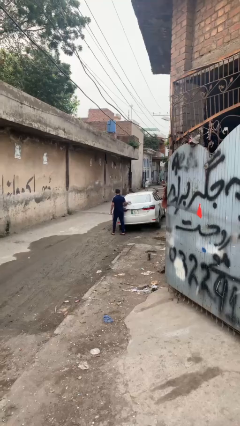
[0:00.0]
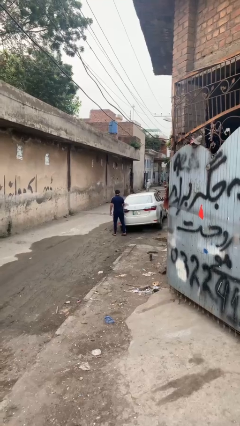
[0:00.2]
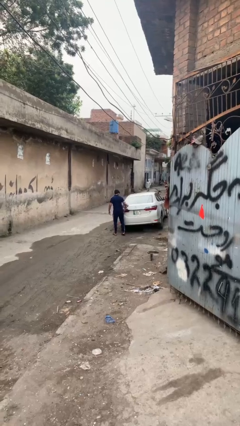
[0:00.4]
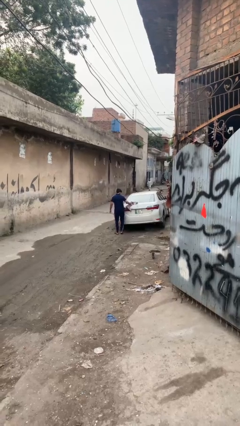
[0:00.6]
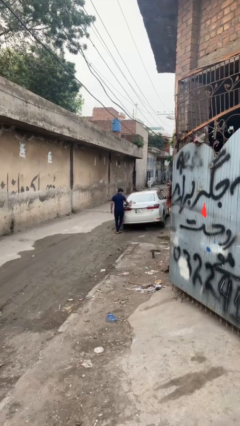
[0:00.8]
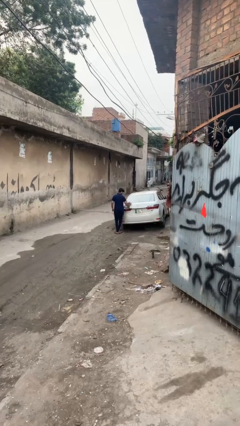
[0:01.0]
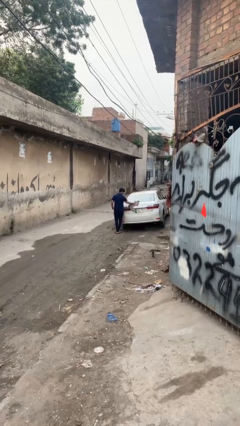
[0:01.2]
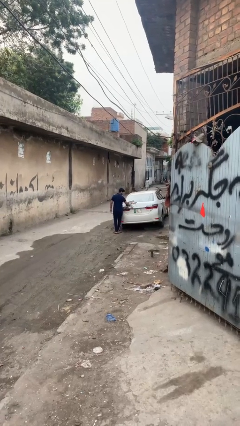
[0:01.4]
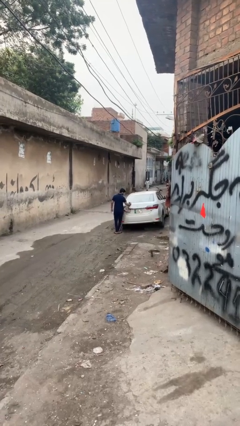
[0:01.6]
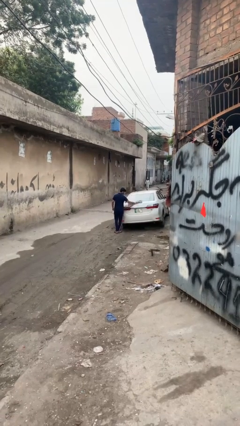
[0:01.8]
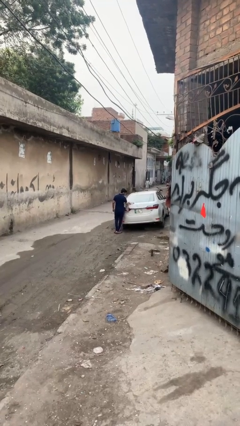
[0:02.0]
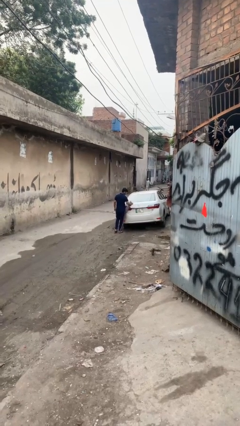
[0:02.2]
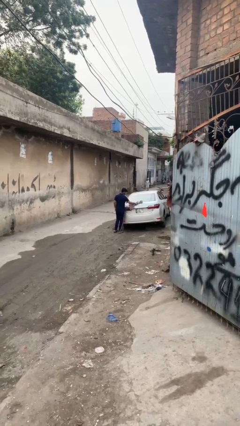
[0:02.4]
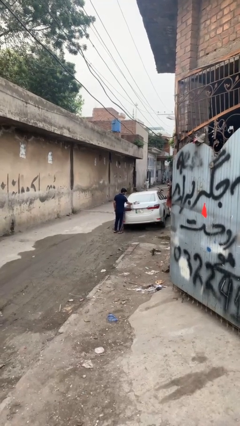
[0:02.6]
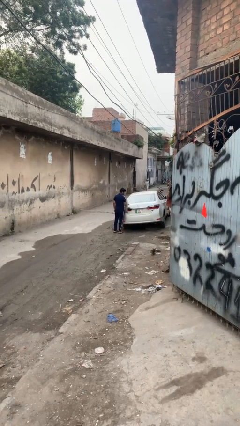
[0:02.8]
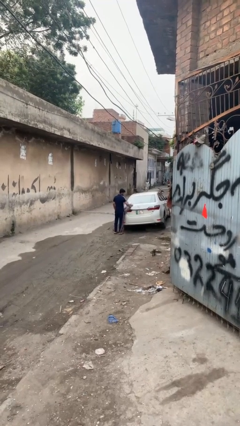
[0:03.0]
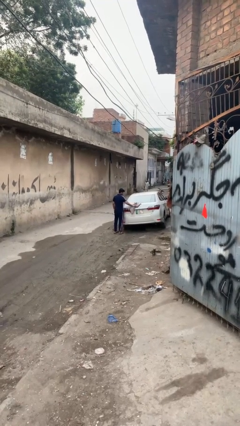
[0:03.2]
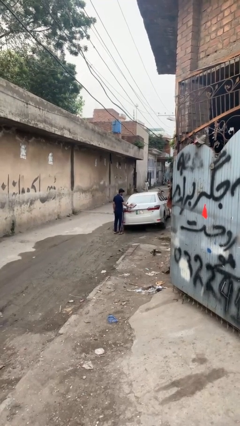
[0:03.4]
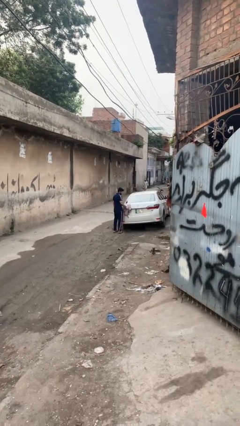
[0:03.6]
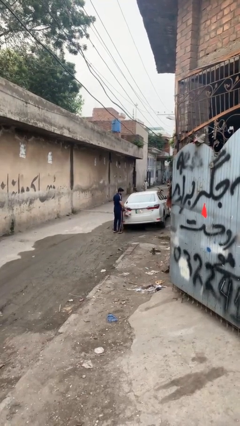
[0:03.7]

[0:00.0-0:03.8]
person polishes car with rag

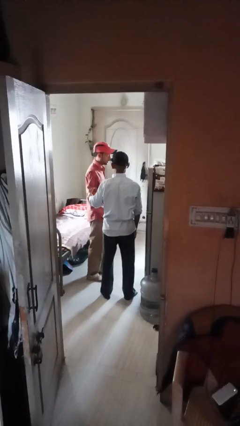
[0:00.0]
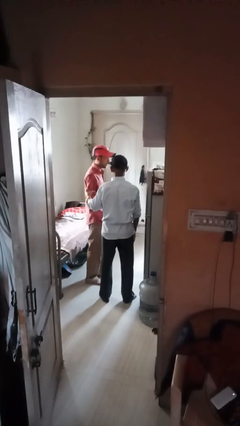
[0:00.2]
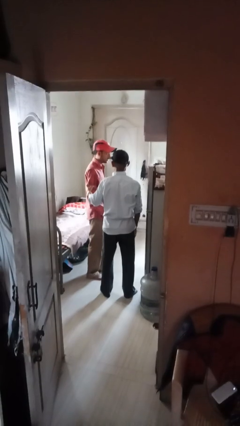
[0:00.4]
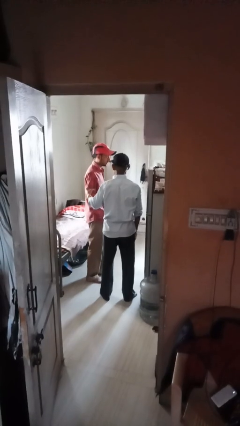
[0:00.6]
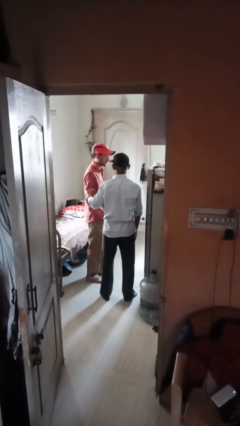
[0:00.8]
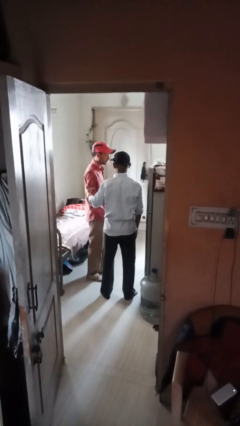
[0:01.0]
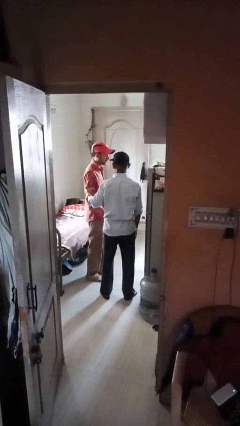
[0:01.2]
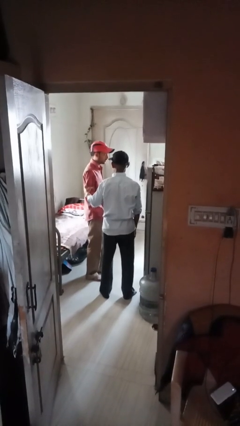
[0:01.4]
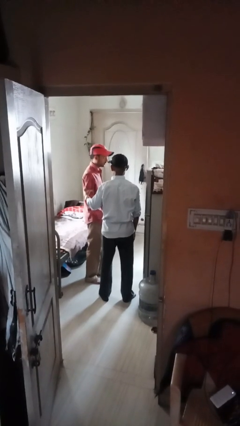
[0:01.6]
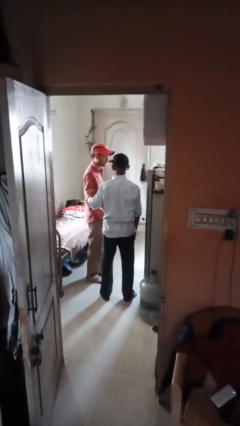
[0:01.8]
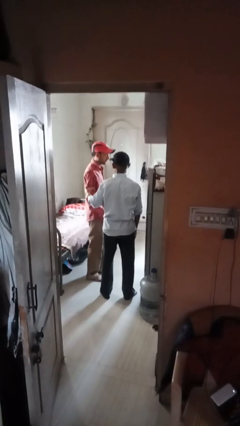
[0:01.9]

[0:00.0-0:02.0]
person grabs person by shoulder

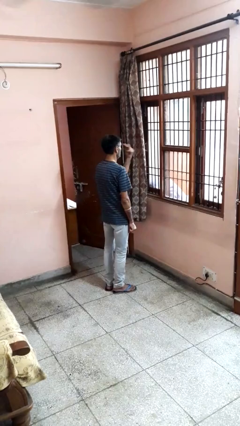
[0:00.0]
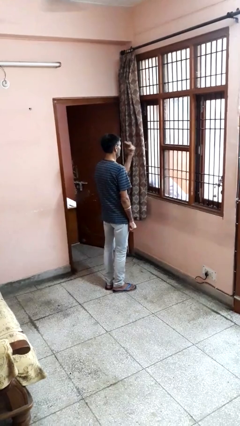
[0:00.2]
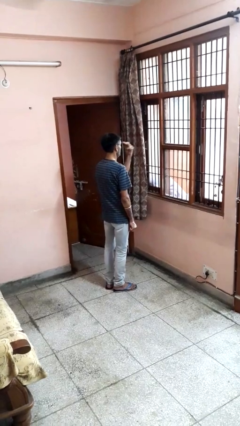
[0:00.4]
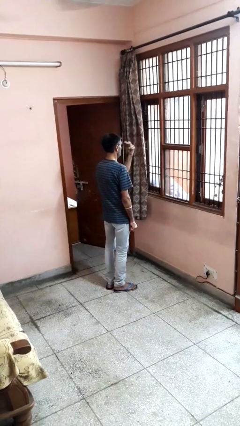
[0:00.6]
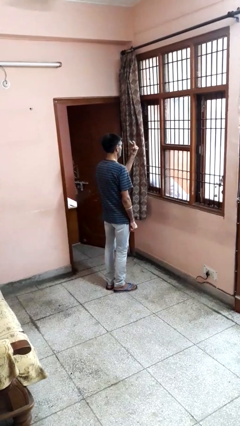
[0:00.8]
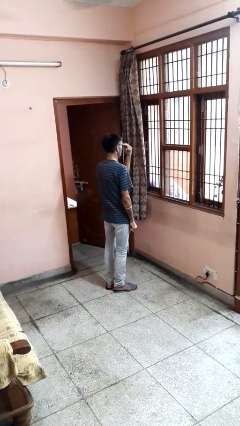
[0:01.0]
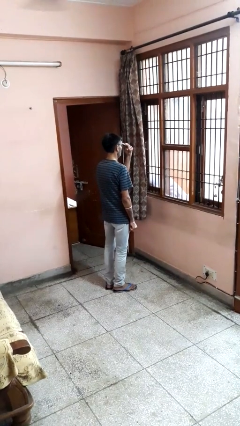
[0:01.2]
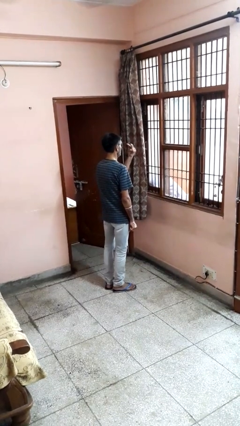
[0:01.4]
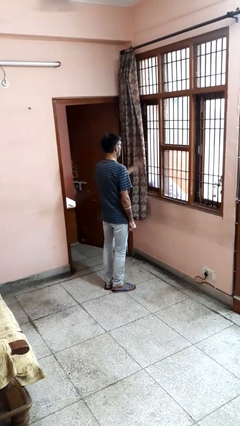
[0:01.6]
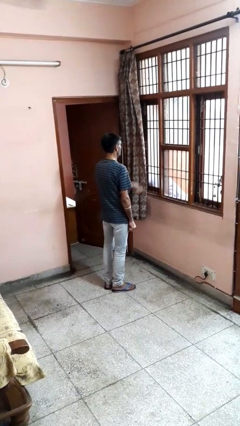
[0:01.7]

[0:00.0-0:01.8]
person gestures watch closely

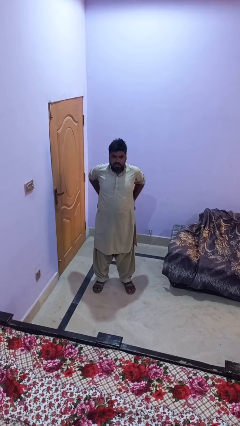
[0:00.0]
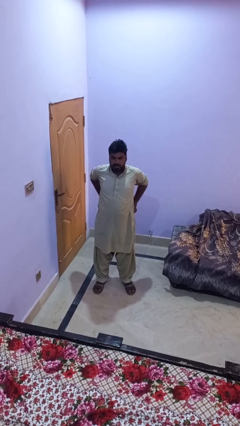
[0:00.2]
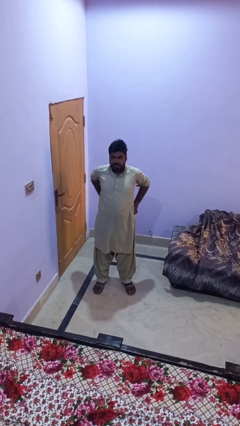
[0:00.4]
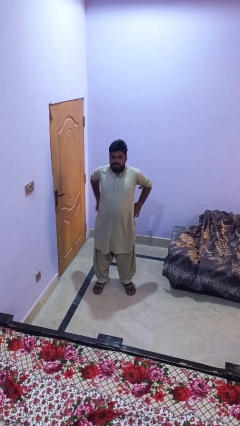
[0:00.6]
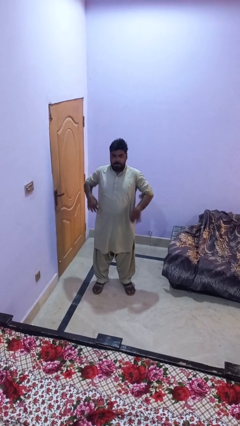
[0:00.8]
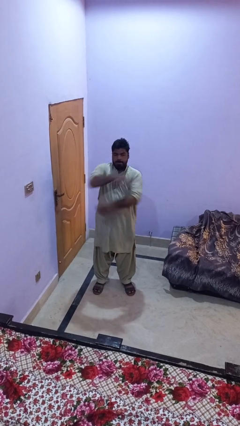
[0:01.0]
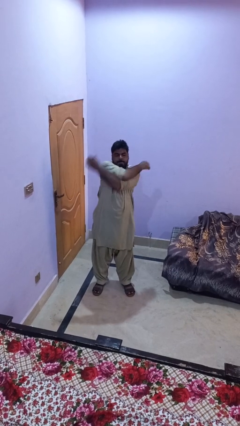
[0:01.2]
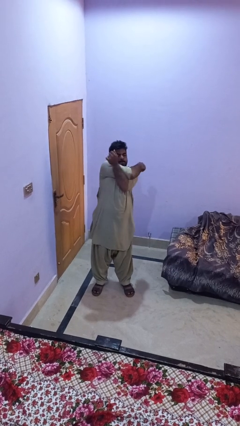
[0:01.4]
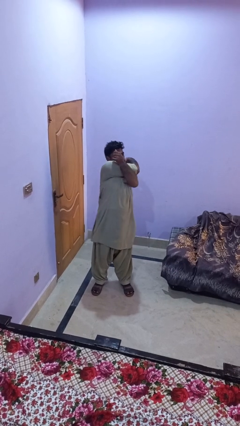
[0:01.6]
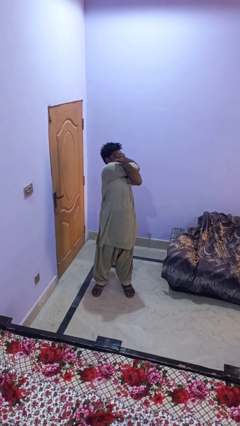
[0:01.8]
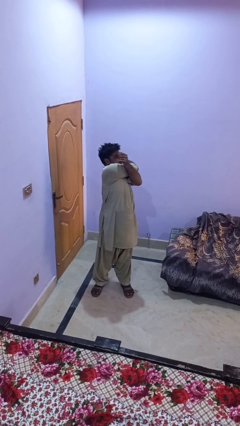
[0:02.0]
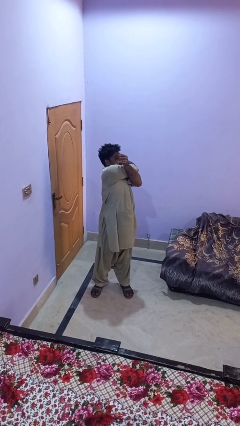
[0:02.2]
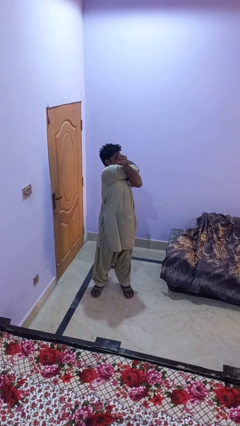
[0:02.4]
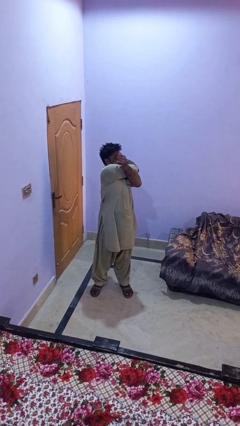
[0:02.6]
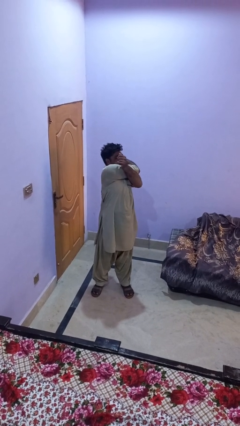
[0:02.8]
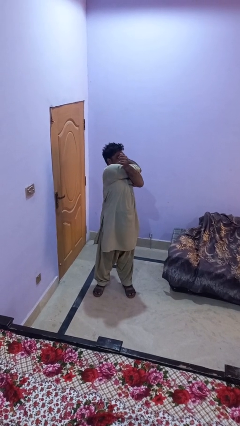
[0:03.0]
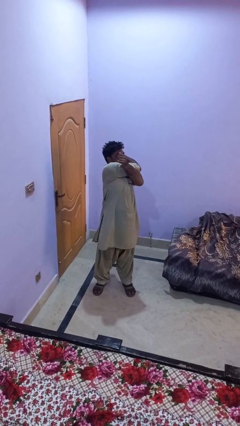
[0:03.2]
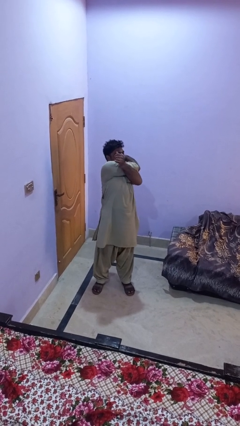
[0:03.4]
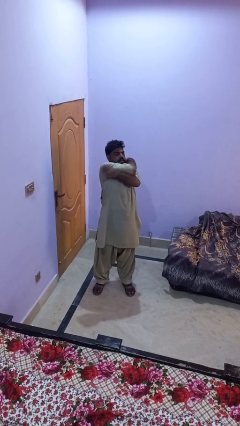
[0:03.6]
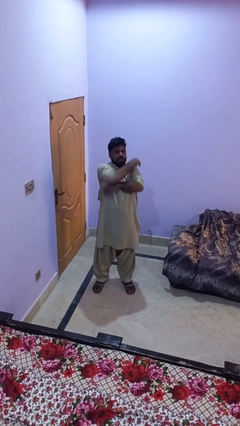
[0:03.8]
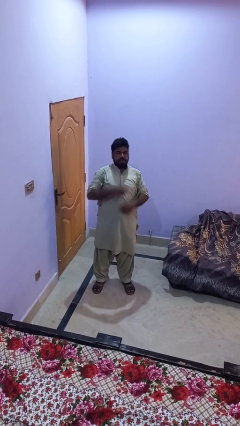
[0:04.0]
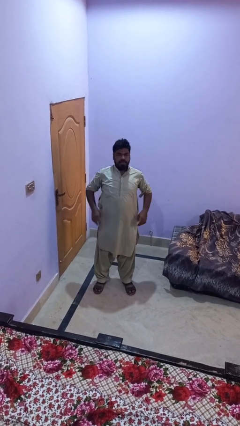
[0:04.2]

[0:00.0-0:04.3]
person stretches arms to side

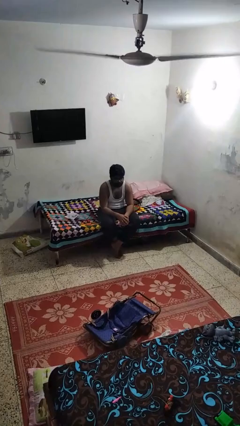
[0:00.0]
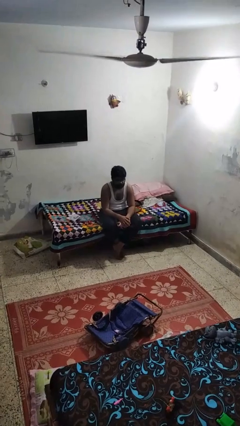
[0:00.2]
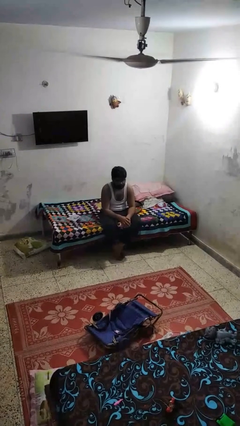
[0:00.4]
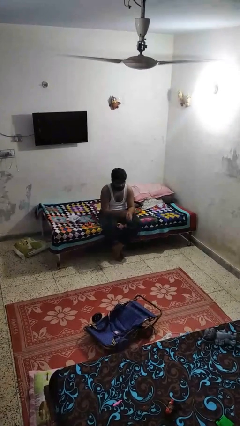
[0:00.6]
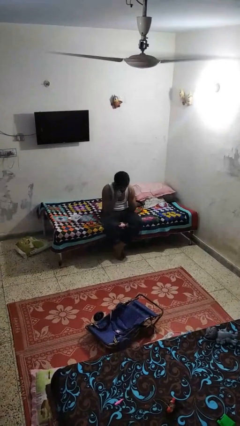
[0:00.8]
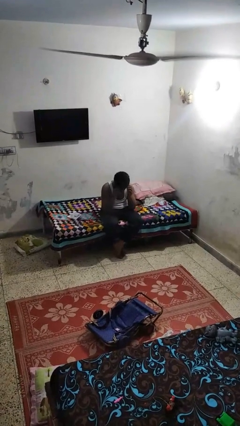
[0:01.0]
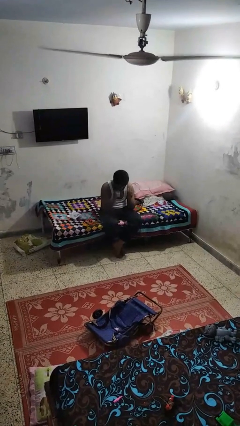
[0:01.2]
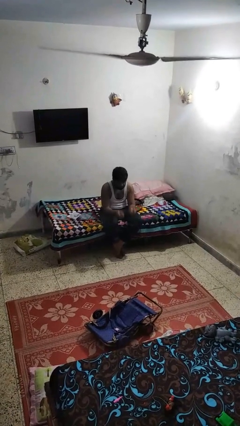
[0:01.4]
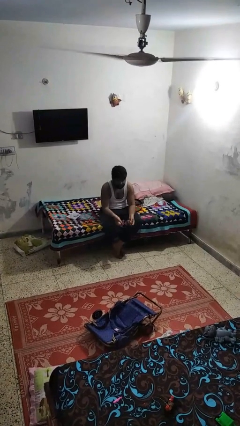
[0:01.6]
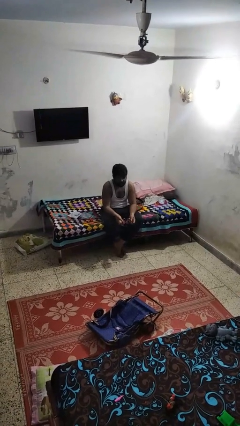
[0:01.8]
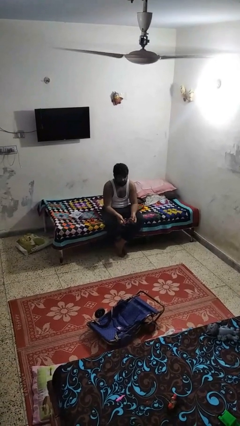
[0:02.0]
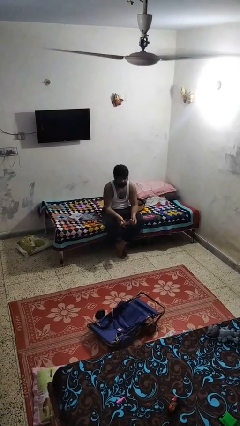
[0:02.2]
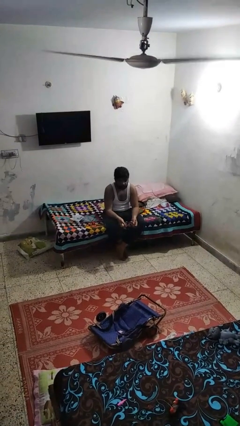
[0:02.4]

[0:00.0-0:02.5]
person takes off glasses

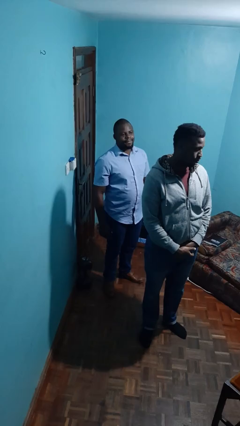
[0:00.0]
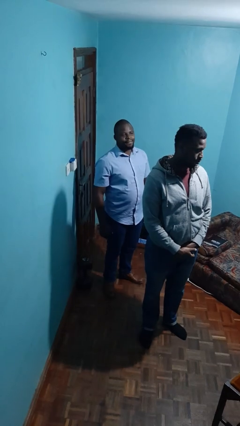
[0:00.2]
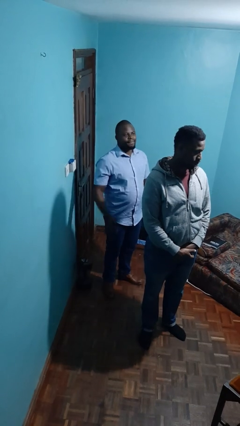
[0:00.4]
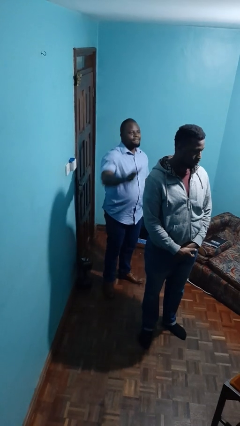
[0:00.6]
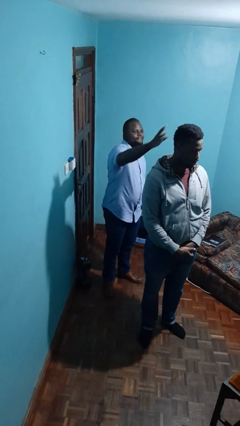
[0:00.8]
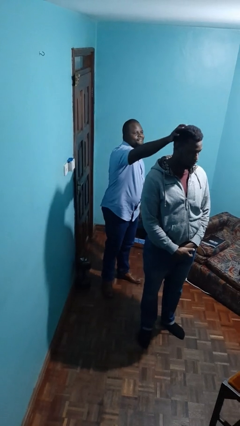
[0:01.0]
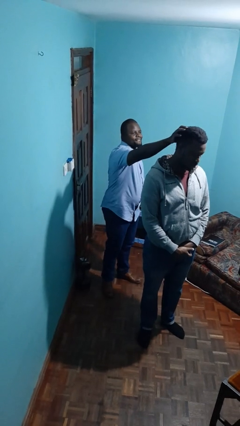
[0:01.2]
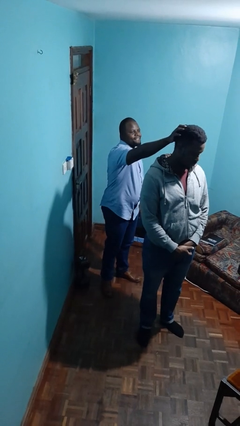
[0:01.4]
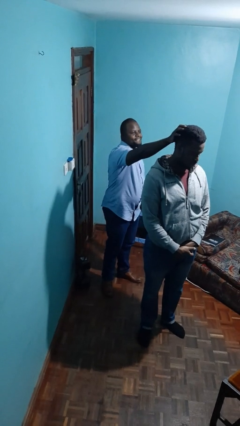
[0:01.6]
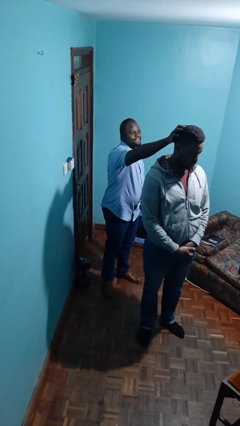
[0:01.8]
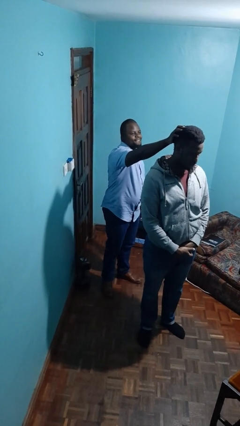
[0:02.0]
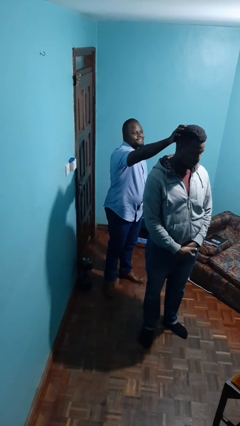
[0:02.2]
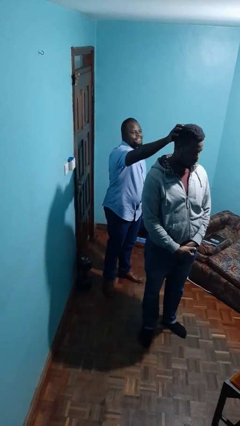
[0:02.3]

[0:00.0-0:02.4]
person grabs person by hair

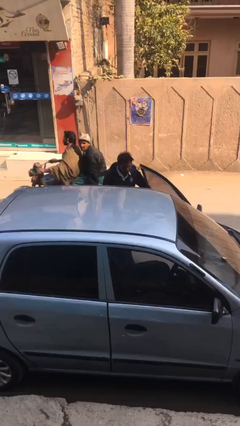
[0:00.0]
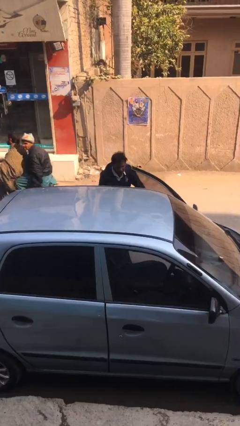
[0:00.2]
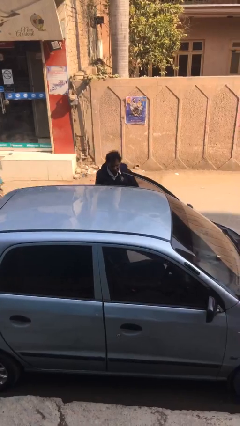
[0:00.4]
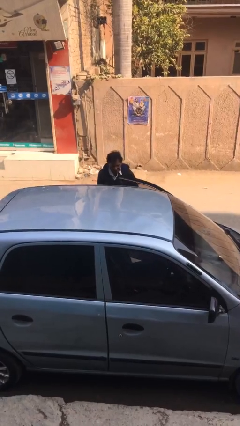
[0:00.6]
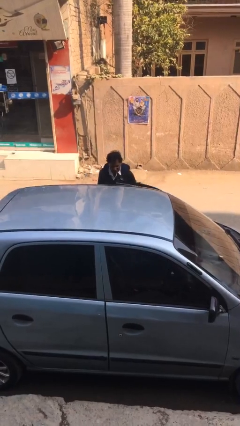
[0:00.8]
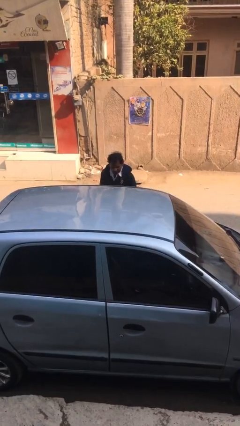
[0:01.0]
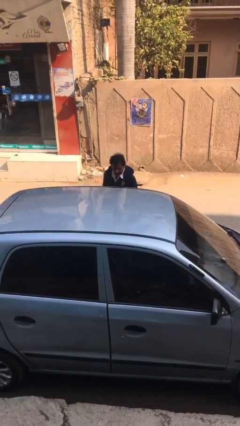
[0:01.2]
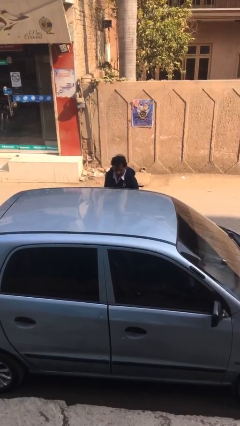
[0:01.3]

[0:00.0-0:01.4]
person closes car door
